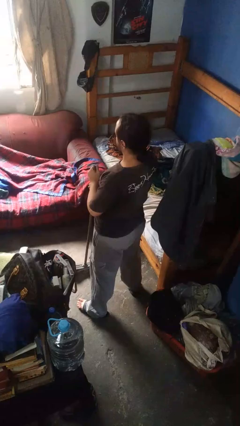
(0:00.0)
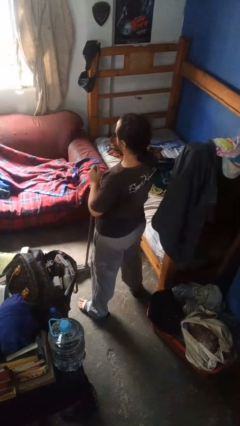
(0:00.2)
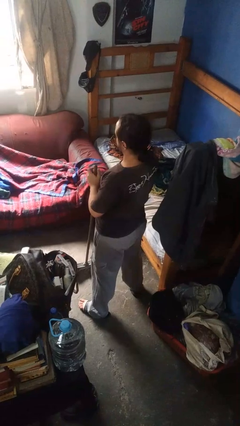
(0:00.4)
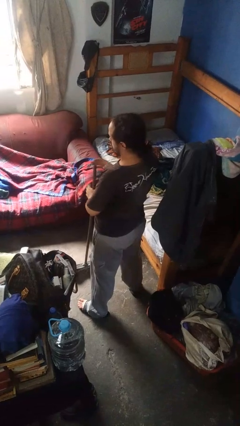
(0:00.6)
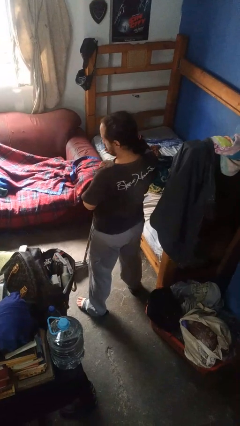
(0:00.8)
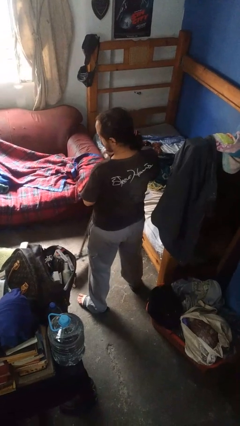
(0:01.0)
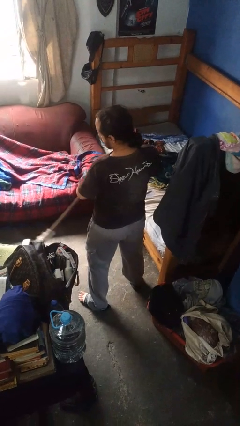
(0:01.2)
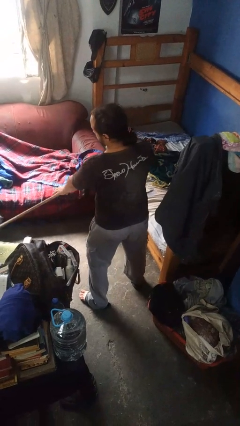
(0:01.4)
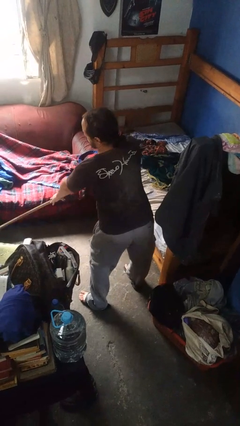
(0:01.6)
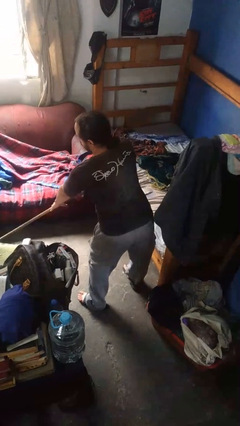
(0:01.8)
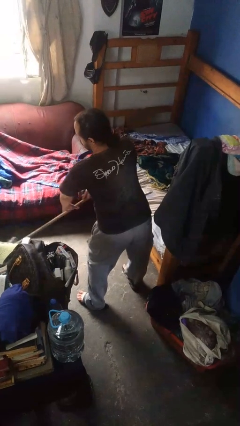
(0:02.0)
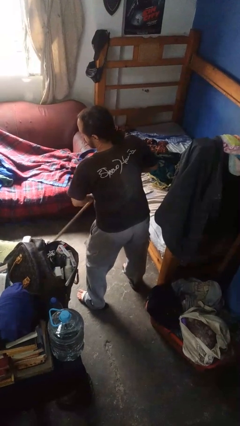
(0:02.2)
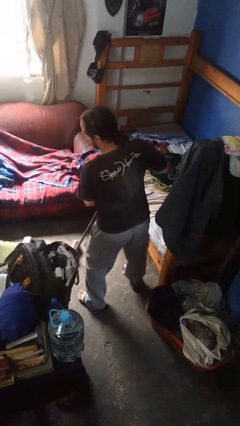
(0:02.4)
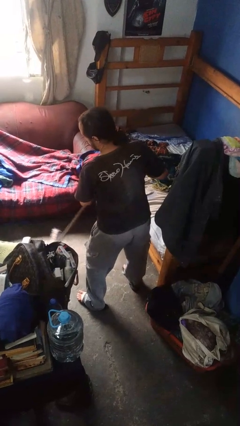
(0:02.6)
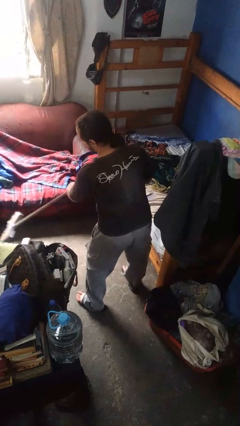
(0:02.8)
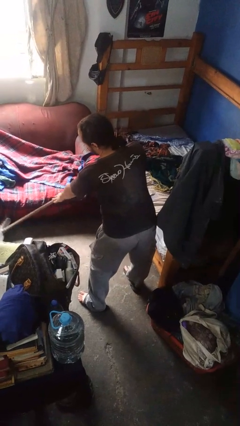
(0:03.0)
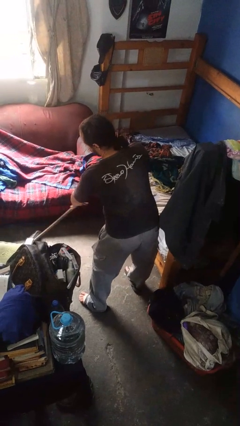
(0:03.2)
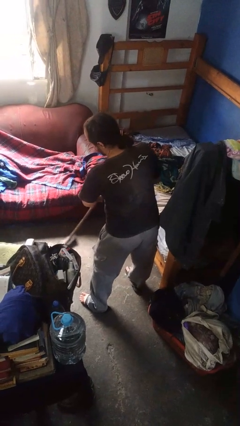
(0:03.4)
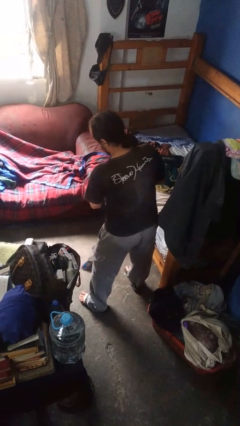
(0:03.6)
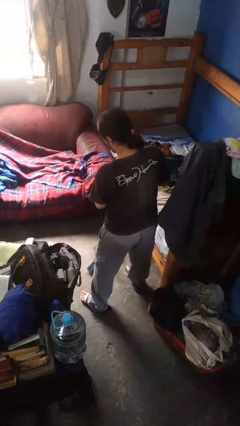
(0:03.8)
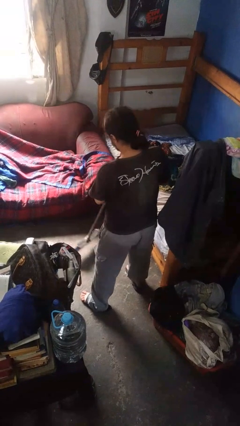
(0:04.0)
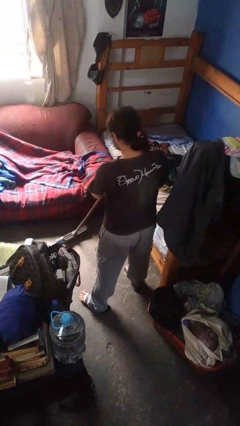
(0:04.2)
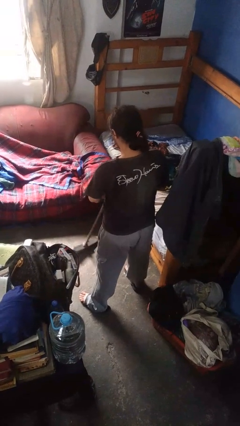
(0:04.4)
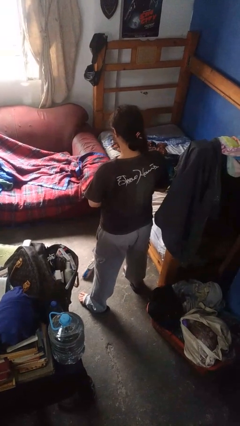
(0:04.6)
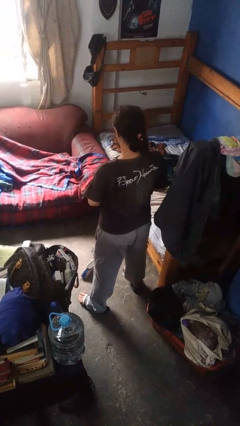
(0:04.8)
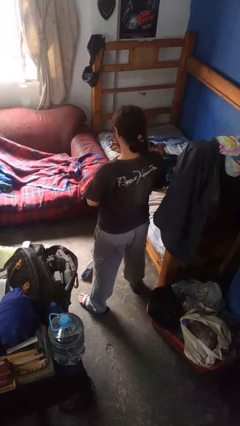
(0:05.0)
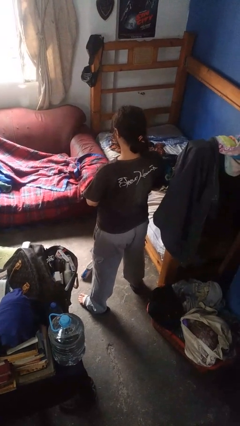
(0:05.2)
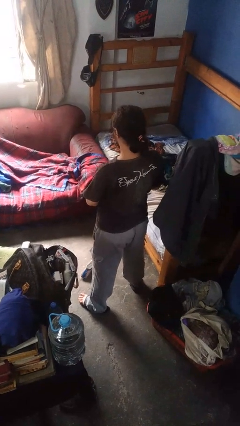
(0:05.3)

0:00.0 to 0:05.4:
person sweeps floor

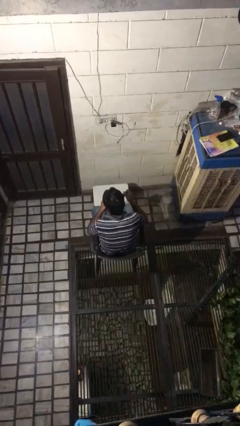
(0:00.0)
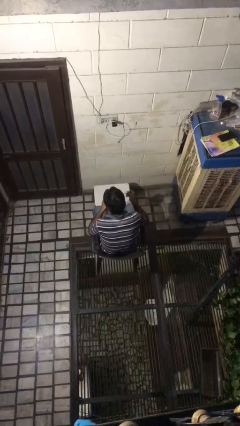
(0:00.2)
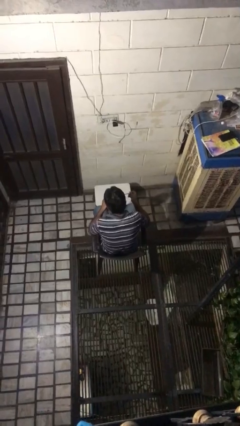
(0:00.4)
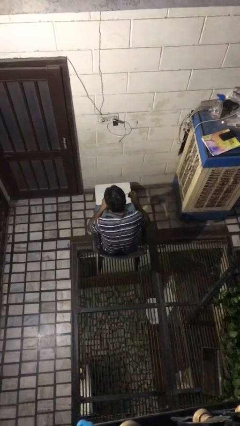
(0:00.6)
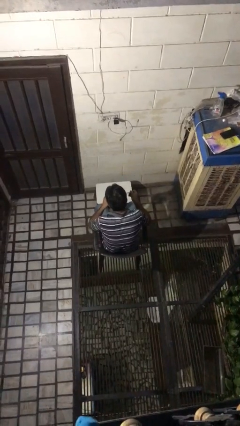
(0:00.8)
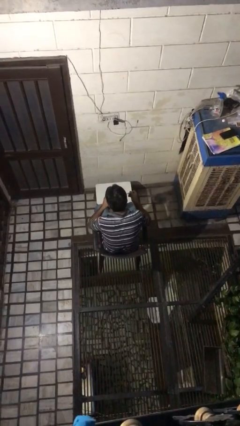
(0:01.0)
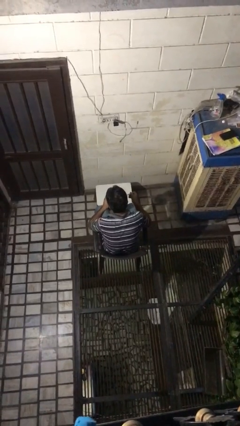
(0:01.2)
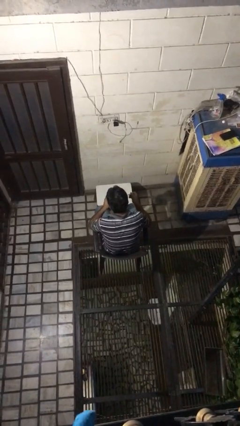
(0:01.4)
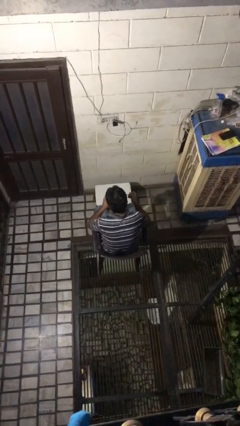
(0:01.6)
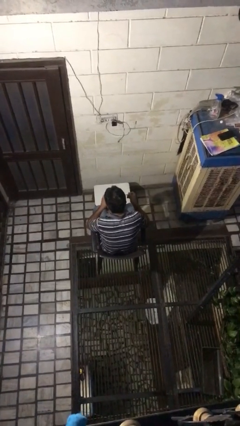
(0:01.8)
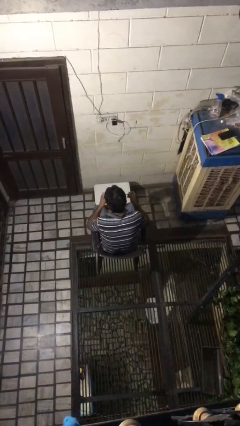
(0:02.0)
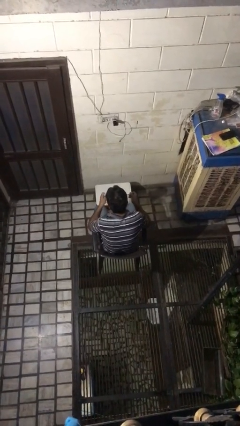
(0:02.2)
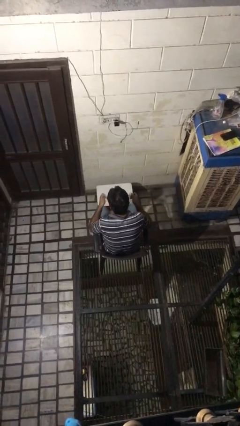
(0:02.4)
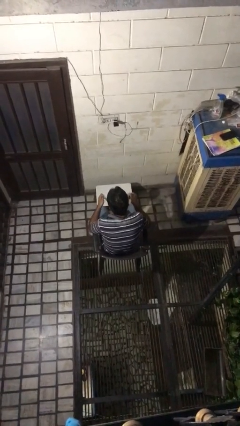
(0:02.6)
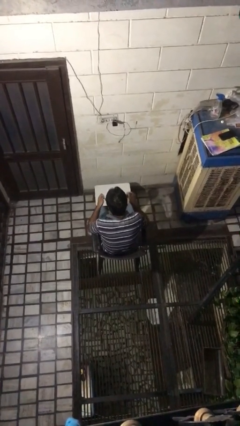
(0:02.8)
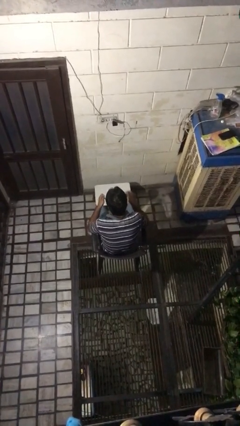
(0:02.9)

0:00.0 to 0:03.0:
person drinks from mug

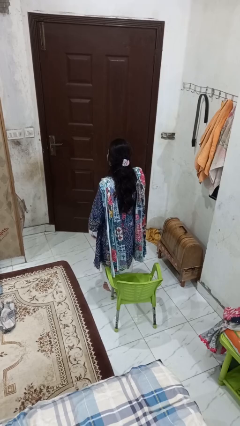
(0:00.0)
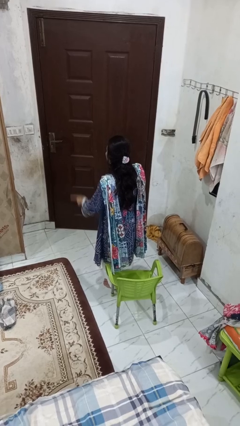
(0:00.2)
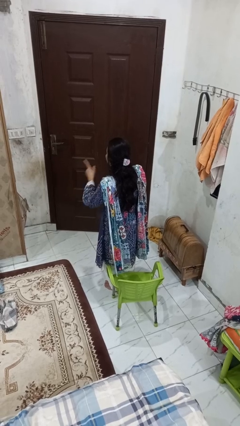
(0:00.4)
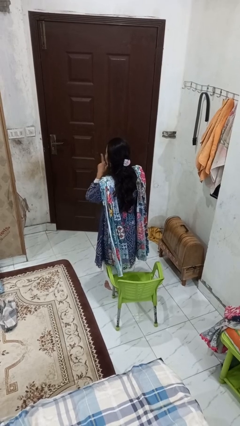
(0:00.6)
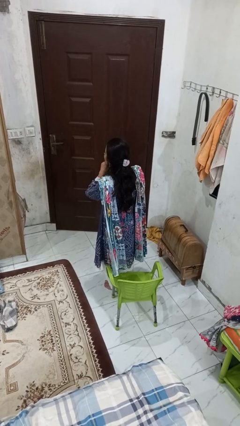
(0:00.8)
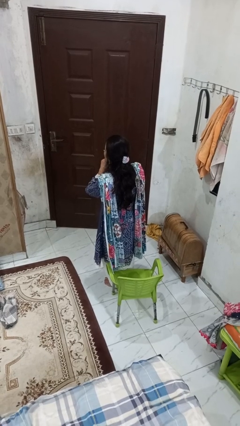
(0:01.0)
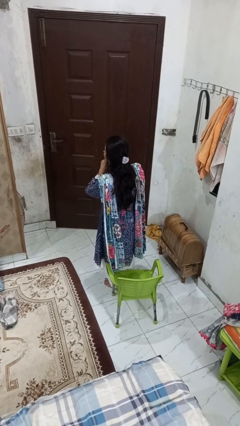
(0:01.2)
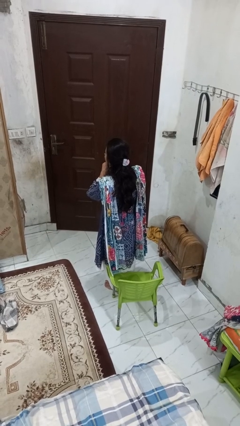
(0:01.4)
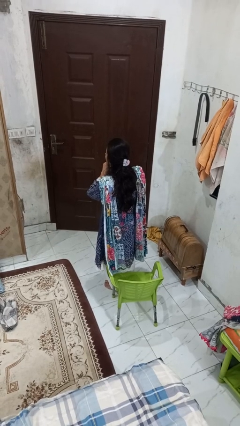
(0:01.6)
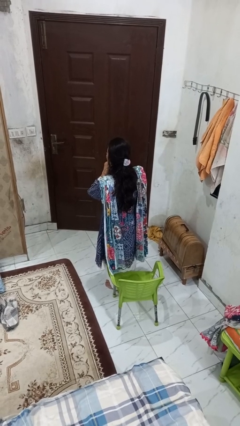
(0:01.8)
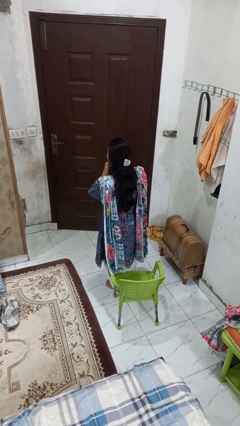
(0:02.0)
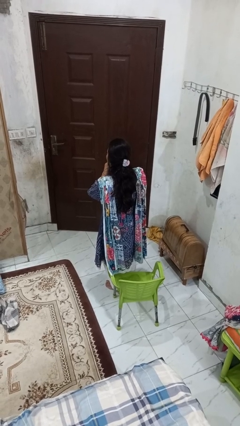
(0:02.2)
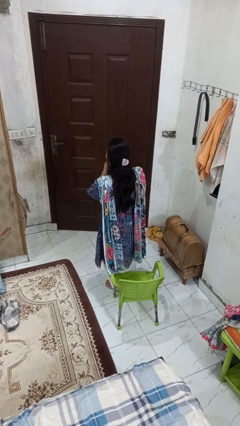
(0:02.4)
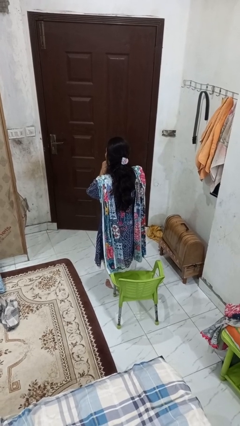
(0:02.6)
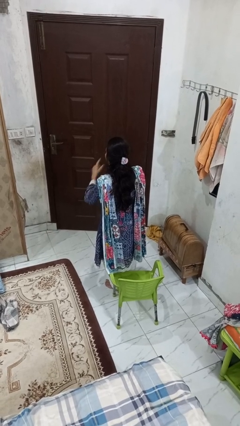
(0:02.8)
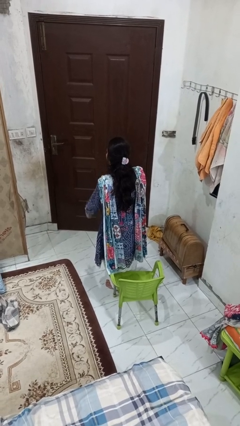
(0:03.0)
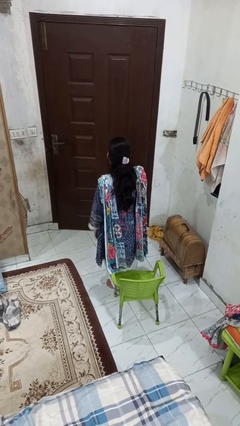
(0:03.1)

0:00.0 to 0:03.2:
person gestures be quiet

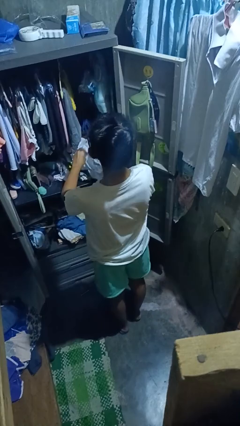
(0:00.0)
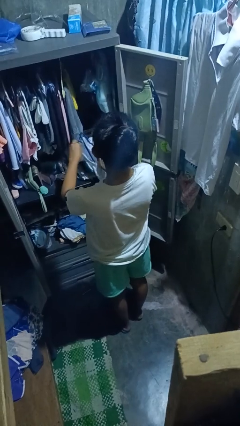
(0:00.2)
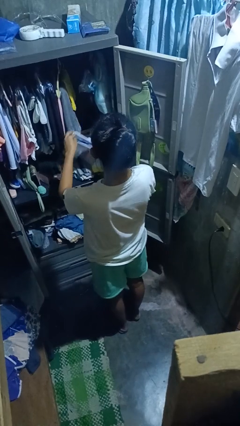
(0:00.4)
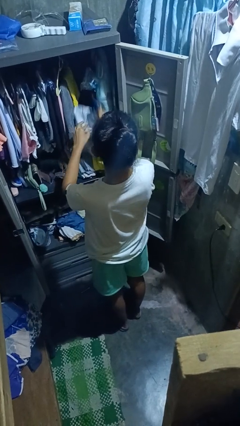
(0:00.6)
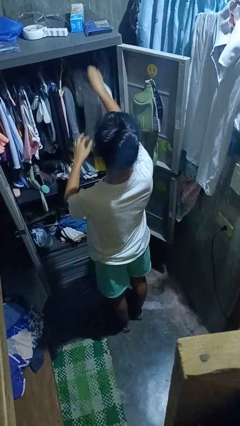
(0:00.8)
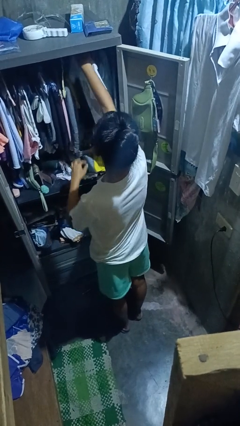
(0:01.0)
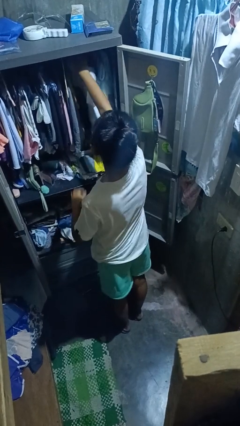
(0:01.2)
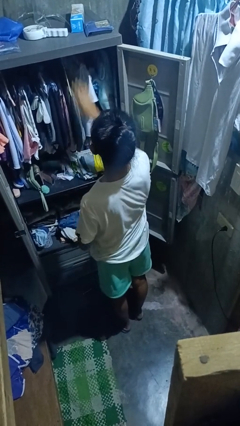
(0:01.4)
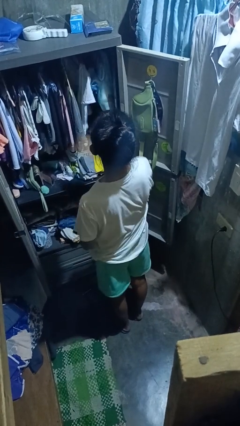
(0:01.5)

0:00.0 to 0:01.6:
person puts clothes into closet

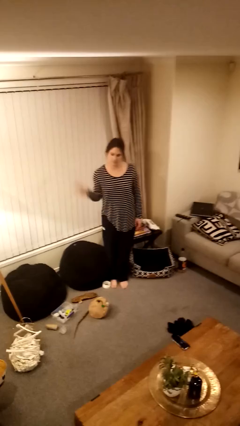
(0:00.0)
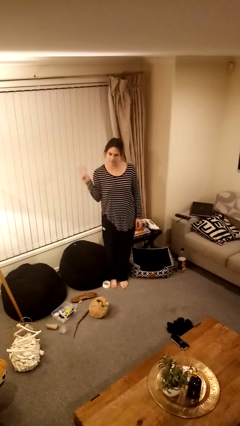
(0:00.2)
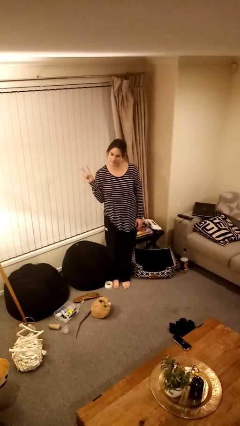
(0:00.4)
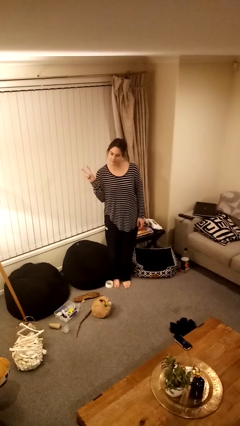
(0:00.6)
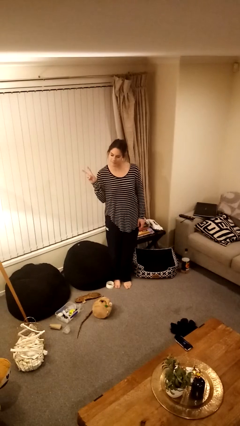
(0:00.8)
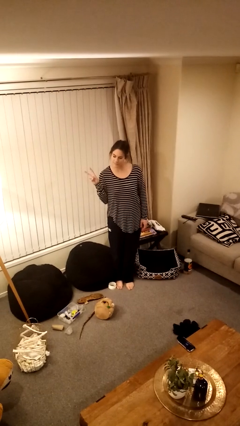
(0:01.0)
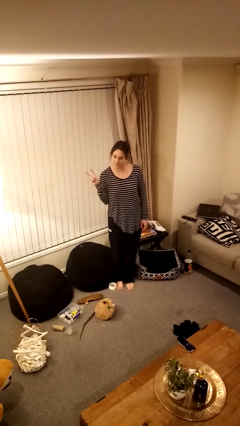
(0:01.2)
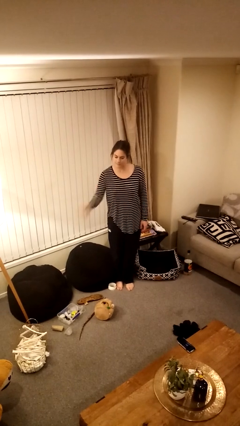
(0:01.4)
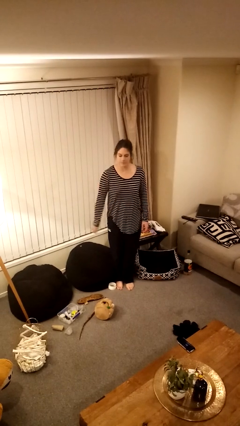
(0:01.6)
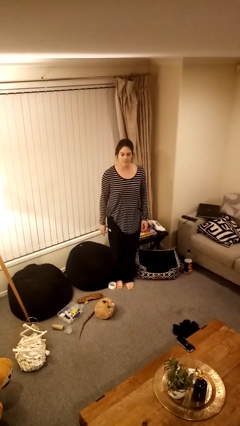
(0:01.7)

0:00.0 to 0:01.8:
person gestures peace

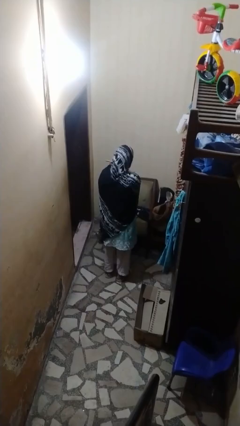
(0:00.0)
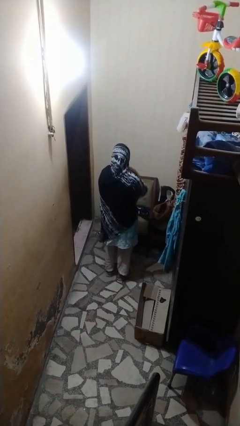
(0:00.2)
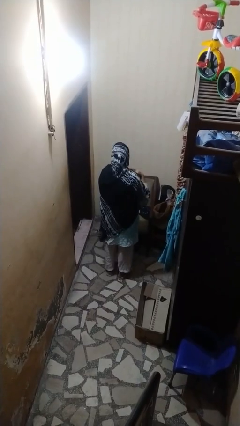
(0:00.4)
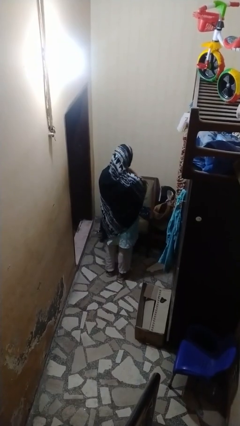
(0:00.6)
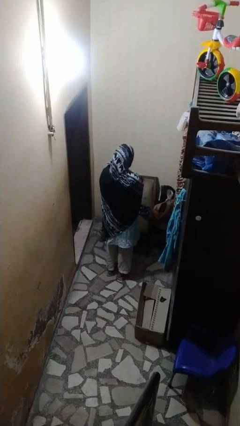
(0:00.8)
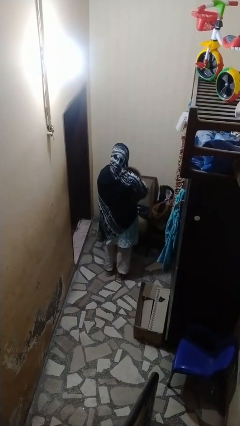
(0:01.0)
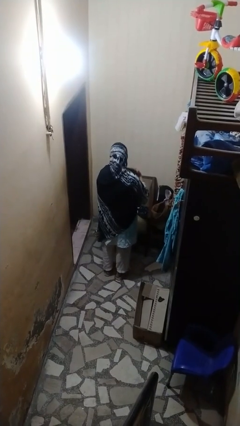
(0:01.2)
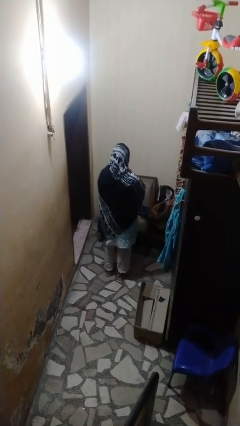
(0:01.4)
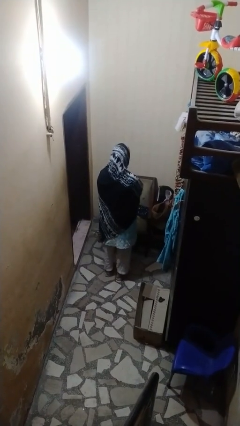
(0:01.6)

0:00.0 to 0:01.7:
person gestures cut

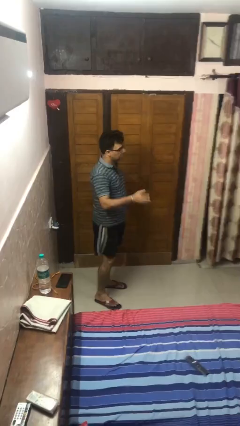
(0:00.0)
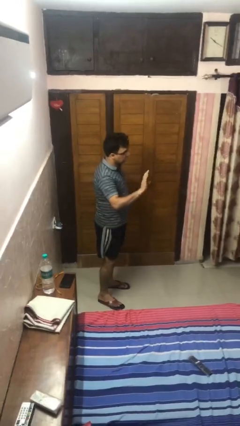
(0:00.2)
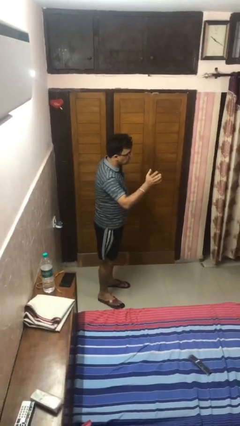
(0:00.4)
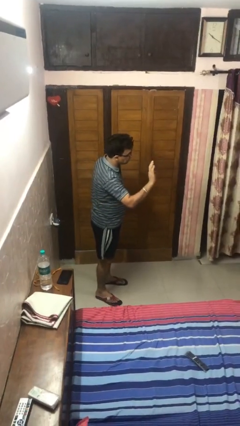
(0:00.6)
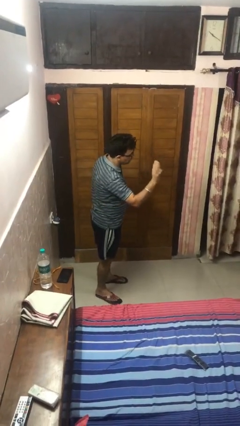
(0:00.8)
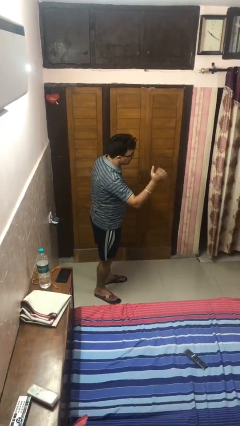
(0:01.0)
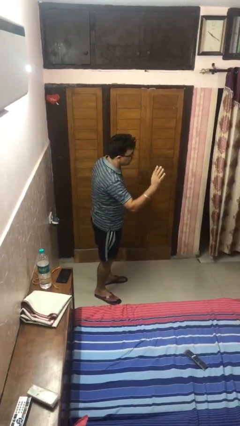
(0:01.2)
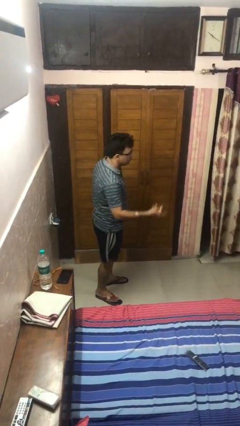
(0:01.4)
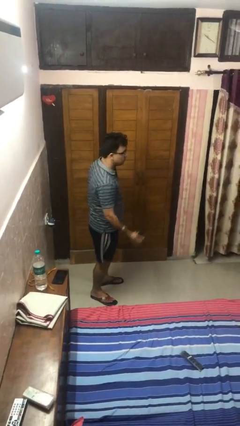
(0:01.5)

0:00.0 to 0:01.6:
person waves at person
